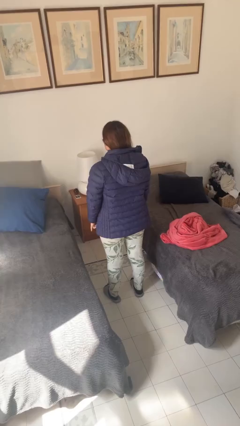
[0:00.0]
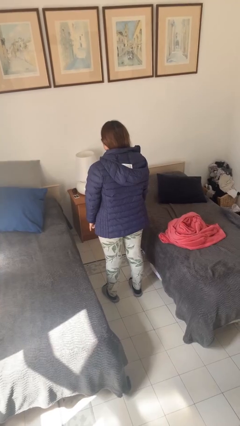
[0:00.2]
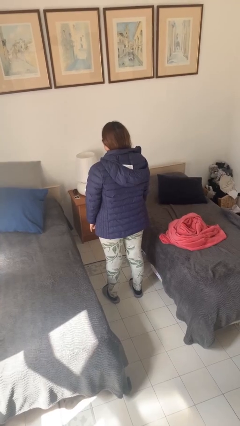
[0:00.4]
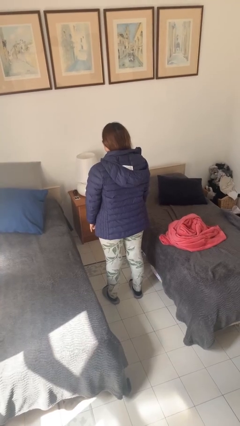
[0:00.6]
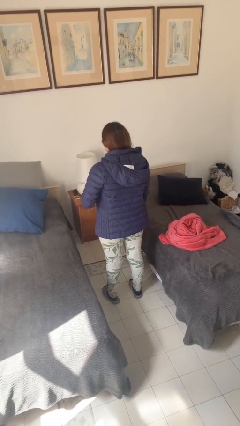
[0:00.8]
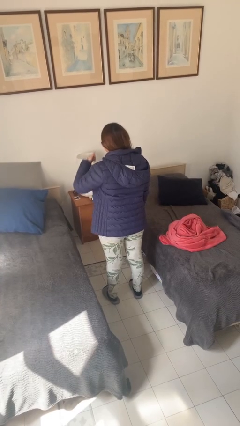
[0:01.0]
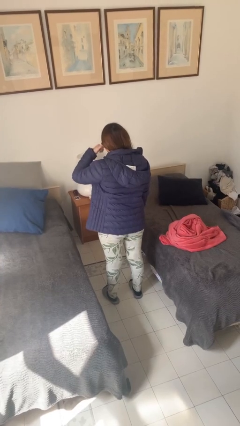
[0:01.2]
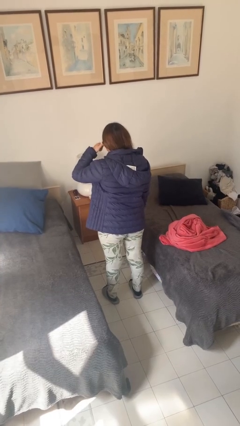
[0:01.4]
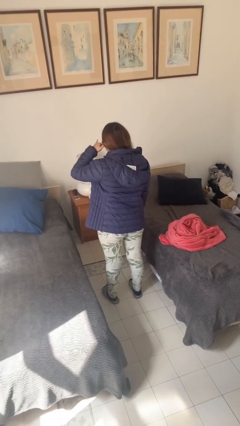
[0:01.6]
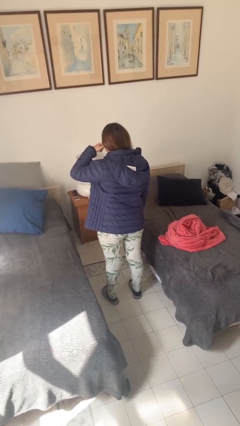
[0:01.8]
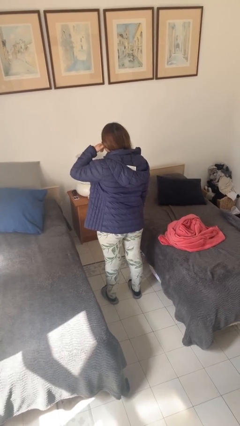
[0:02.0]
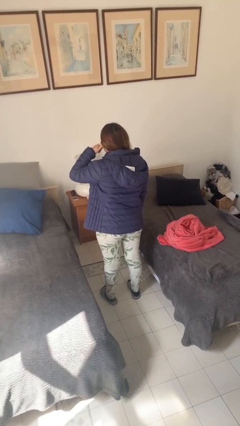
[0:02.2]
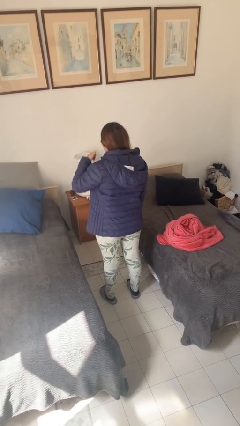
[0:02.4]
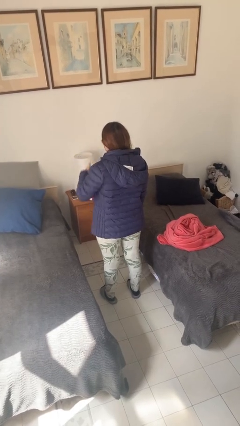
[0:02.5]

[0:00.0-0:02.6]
person gestures call me

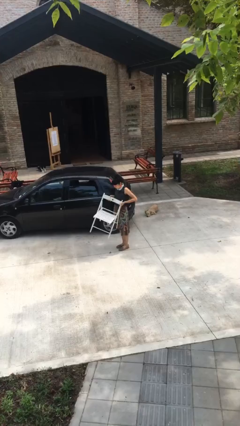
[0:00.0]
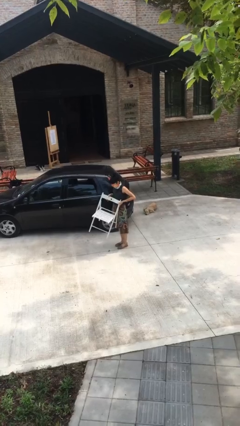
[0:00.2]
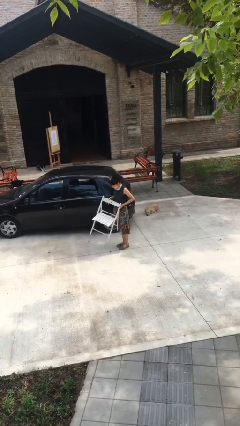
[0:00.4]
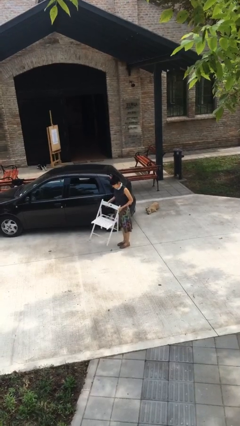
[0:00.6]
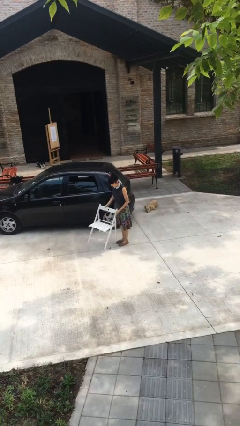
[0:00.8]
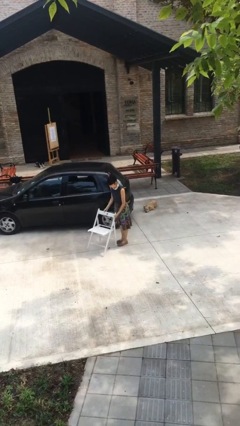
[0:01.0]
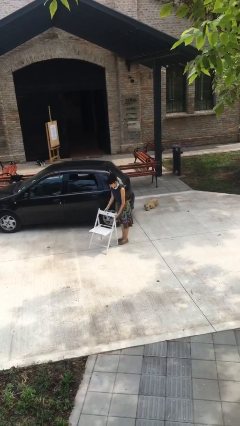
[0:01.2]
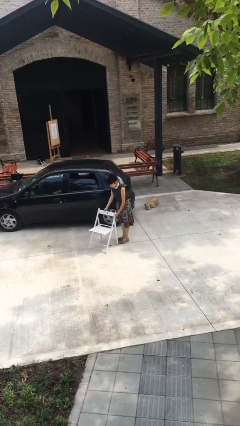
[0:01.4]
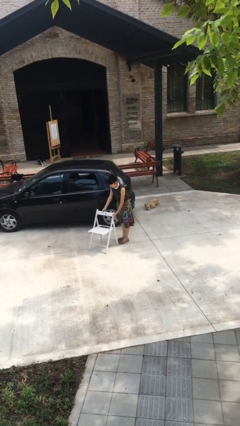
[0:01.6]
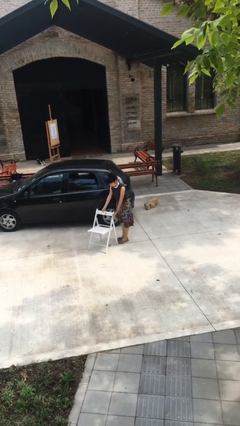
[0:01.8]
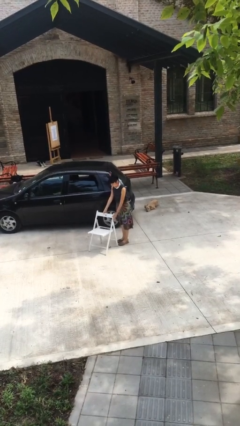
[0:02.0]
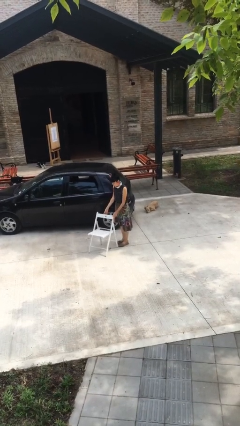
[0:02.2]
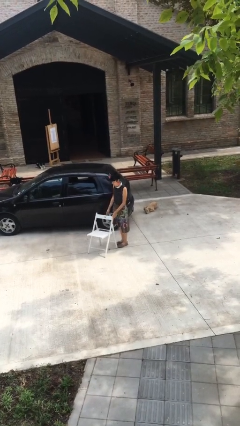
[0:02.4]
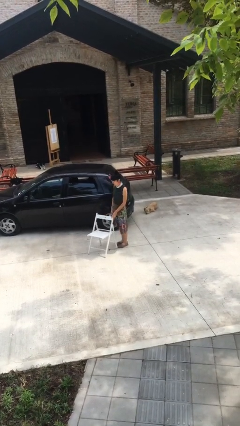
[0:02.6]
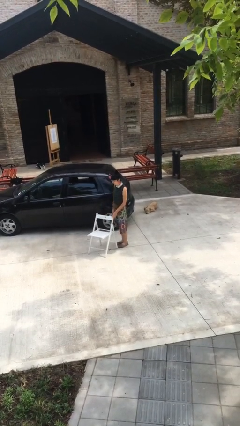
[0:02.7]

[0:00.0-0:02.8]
person puts down object on floor

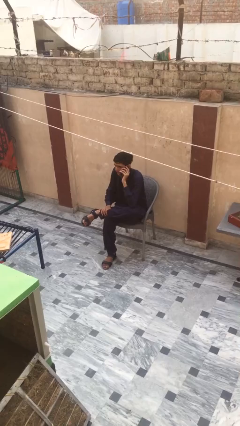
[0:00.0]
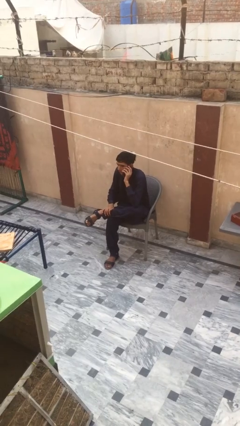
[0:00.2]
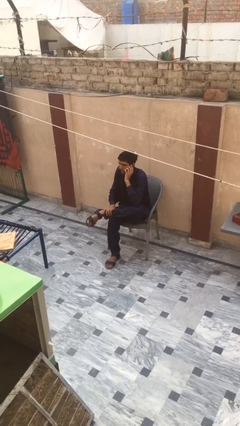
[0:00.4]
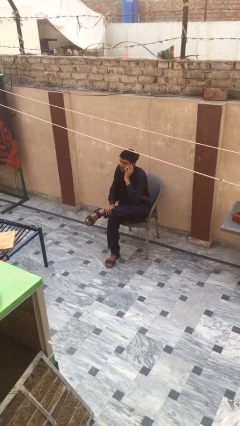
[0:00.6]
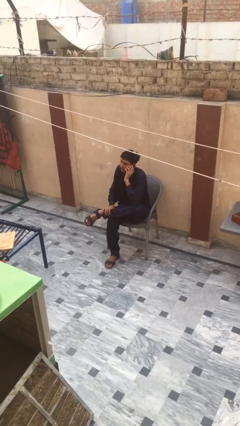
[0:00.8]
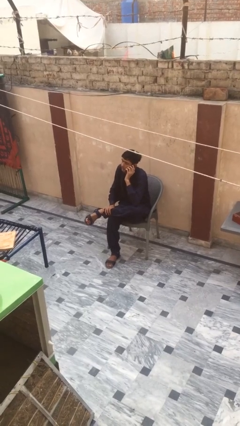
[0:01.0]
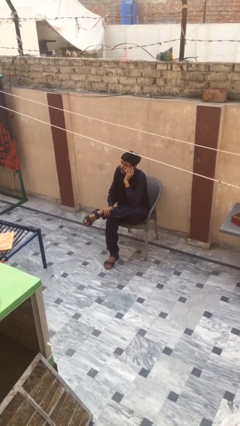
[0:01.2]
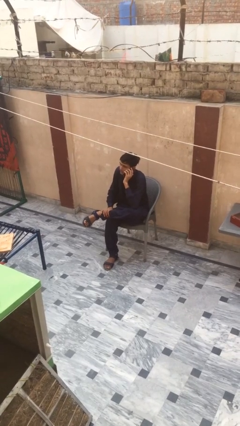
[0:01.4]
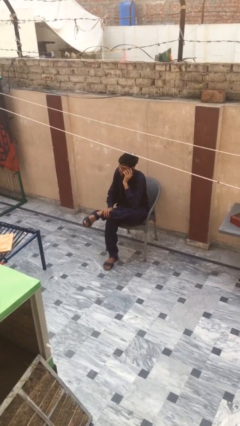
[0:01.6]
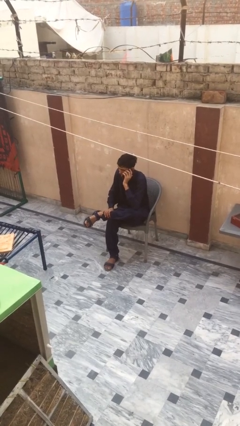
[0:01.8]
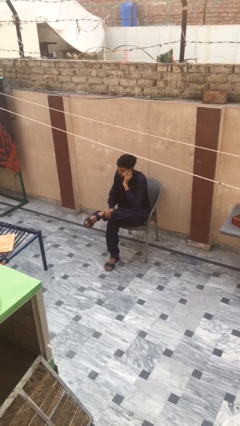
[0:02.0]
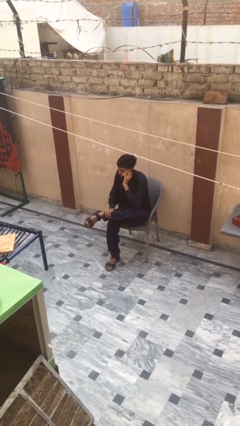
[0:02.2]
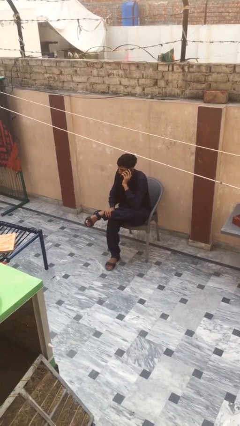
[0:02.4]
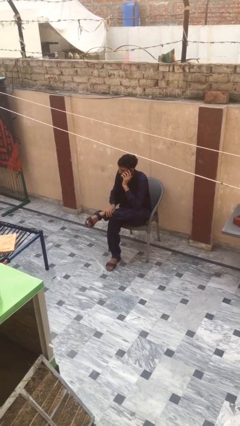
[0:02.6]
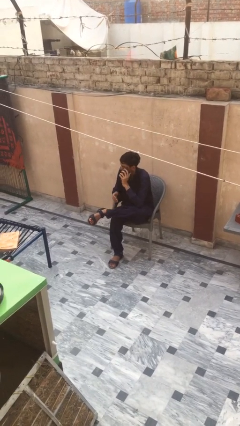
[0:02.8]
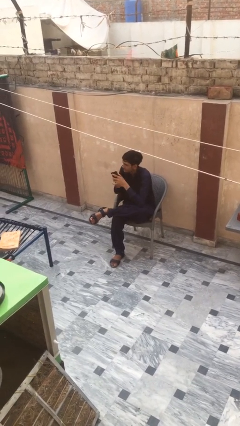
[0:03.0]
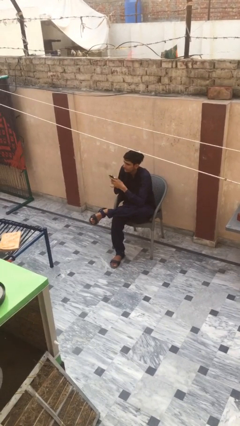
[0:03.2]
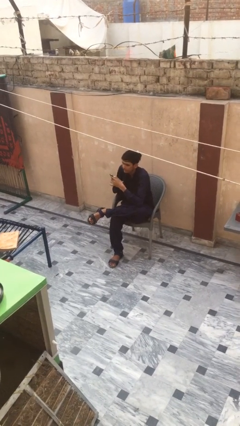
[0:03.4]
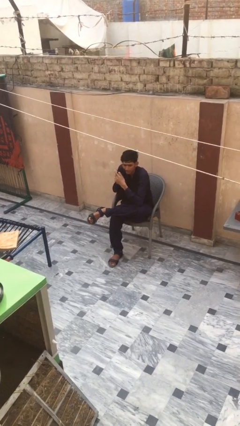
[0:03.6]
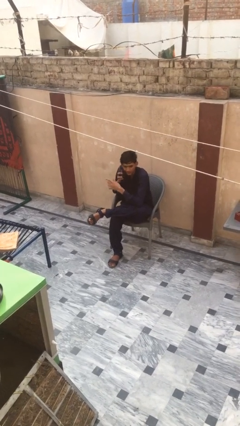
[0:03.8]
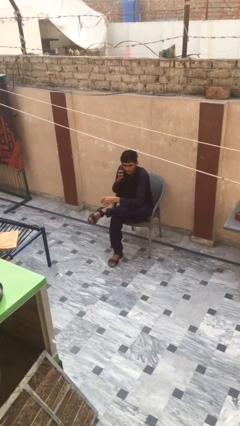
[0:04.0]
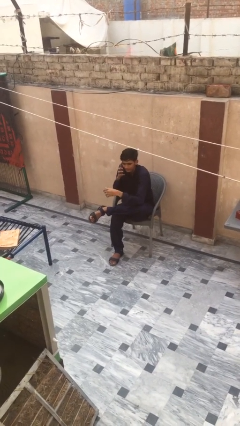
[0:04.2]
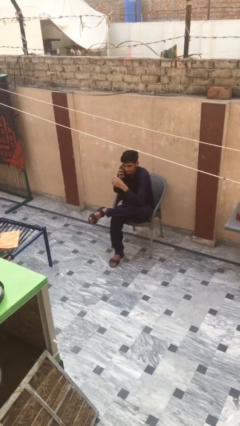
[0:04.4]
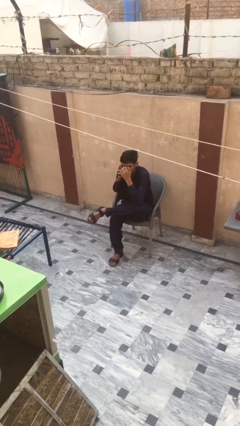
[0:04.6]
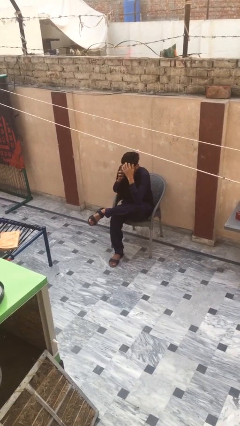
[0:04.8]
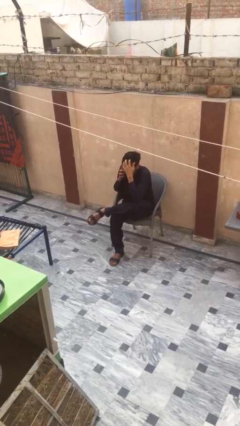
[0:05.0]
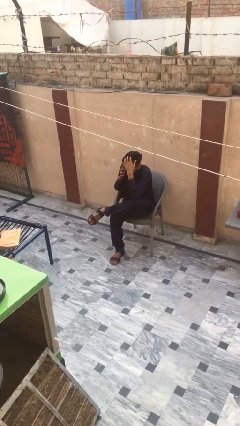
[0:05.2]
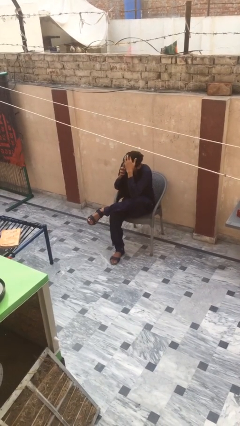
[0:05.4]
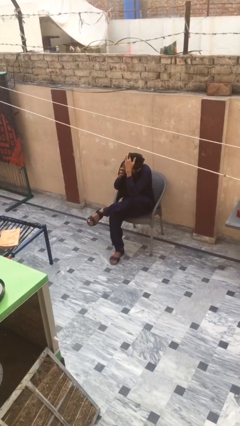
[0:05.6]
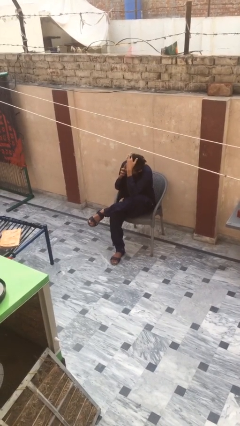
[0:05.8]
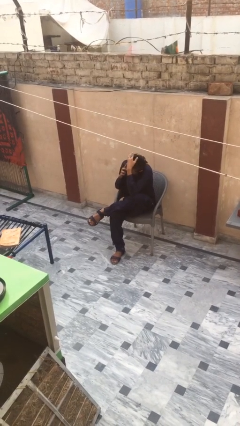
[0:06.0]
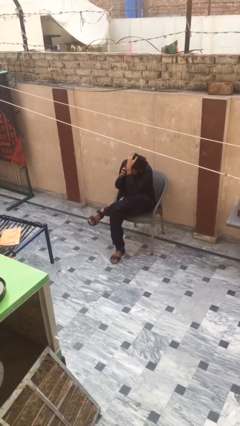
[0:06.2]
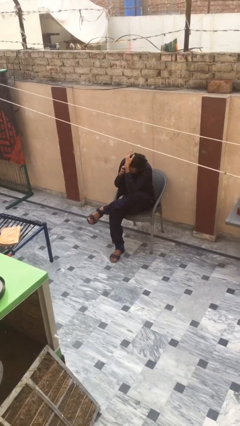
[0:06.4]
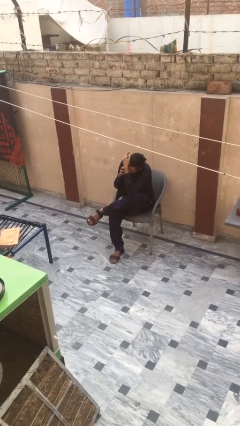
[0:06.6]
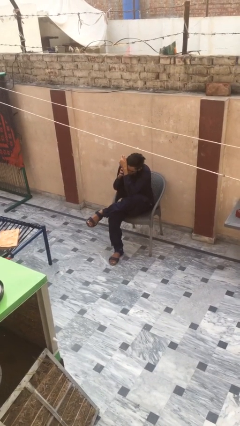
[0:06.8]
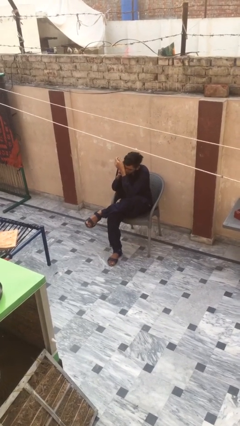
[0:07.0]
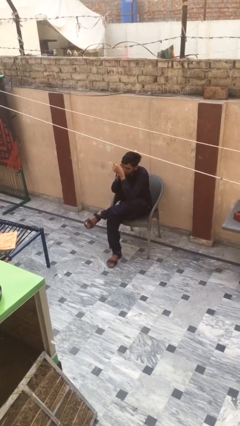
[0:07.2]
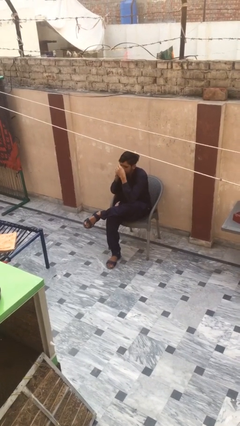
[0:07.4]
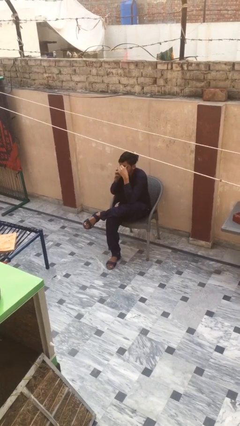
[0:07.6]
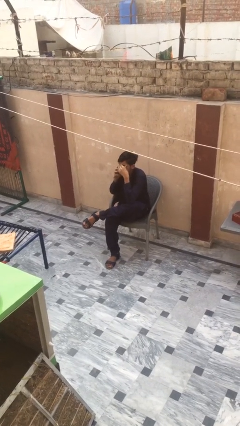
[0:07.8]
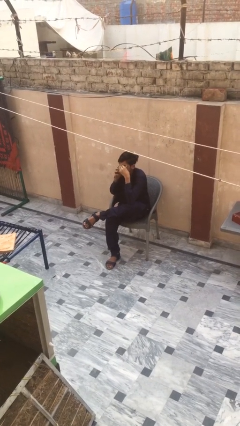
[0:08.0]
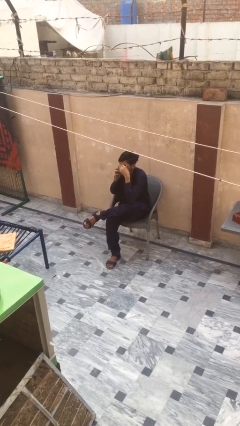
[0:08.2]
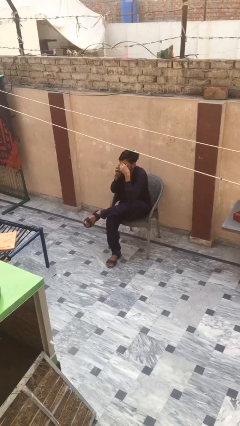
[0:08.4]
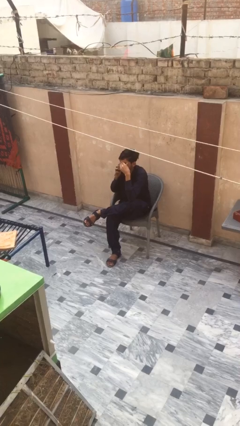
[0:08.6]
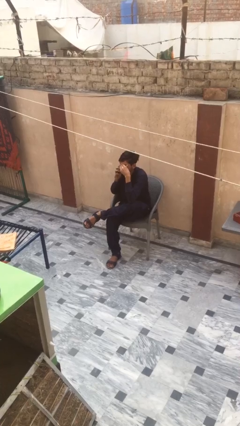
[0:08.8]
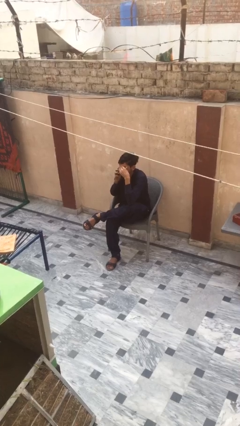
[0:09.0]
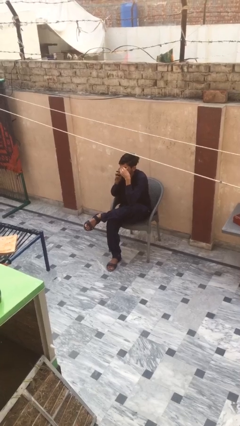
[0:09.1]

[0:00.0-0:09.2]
person talks on phone

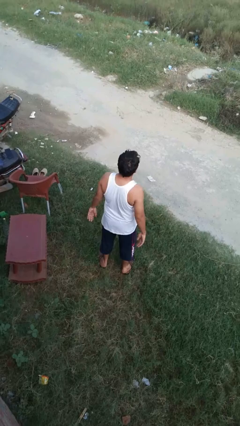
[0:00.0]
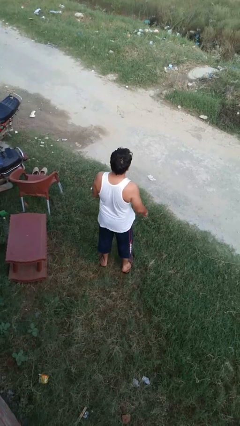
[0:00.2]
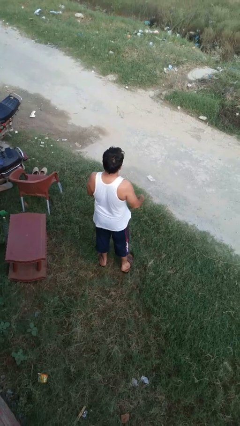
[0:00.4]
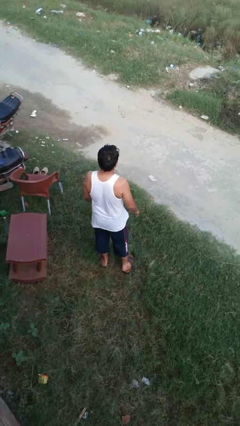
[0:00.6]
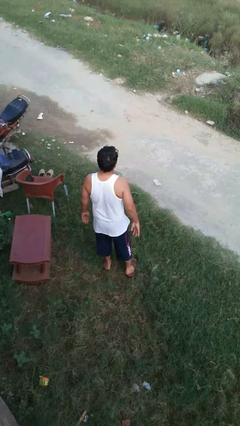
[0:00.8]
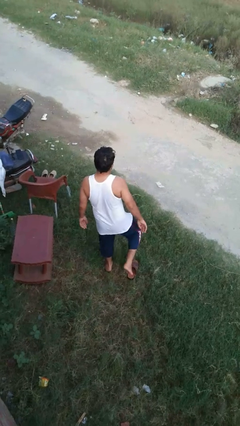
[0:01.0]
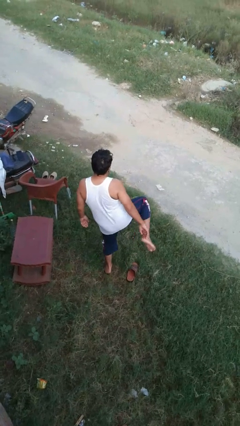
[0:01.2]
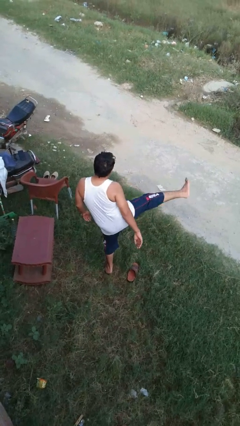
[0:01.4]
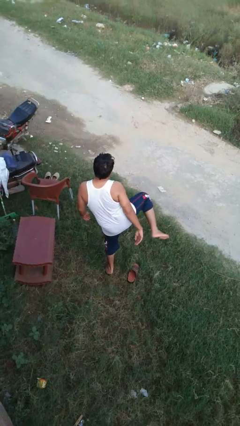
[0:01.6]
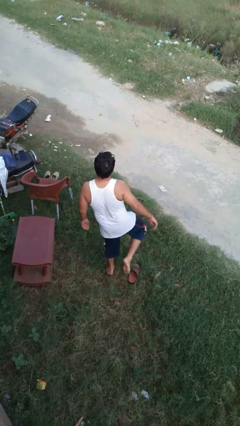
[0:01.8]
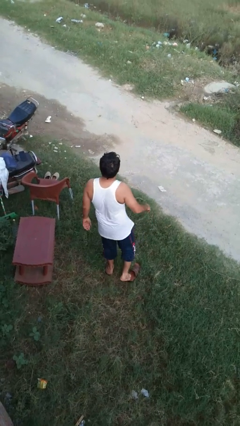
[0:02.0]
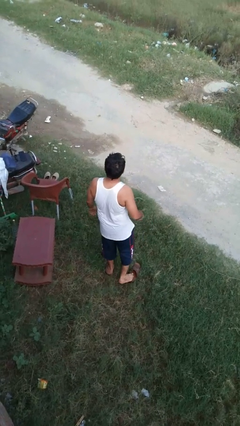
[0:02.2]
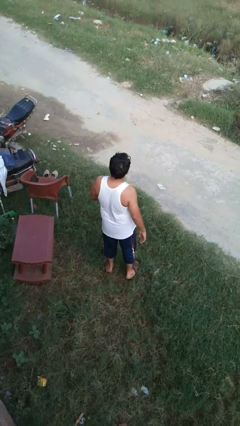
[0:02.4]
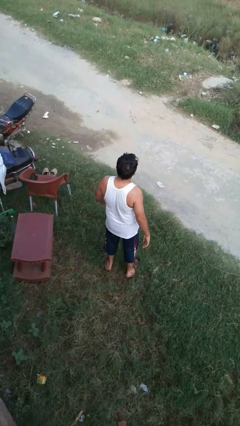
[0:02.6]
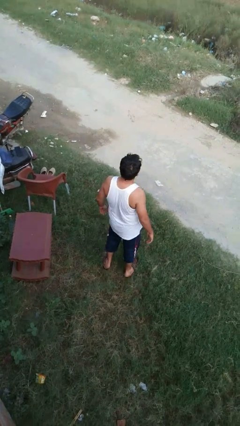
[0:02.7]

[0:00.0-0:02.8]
person karate kicks

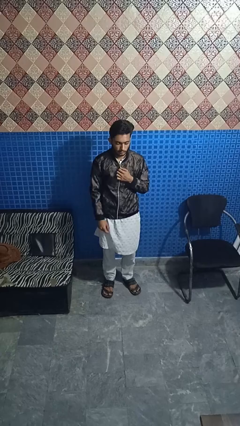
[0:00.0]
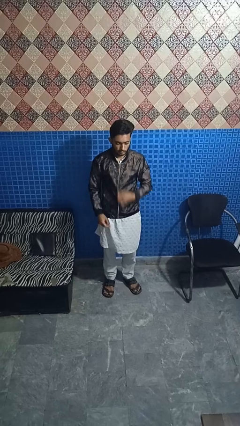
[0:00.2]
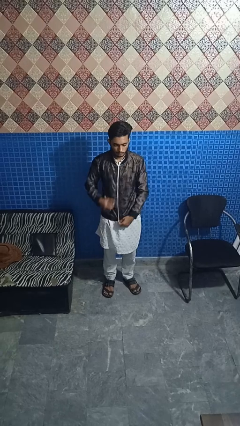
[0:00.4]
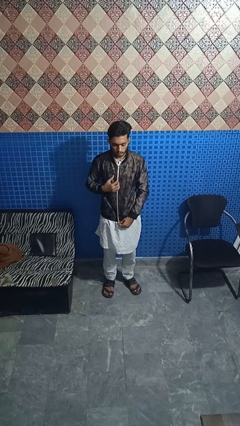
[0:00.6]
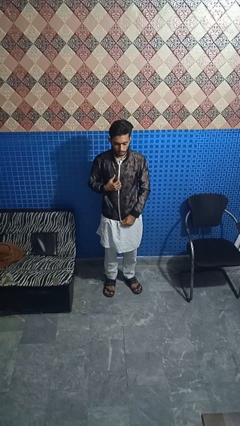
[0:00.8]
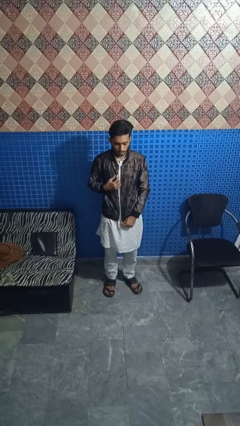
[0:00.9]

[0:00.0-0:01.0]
person unzips jacket
